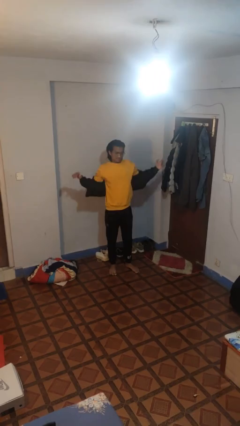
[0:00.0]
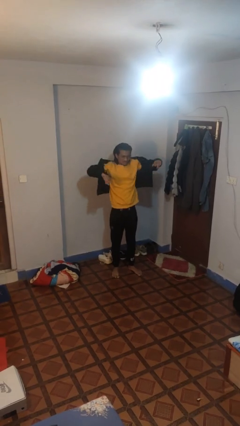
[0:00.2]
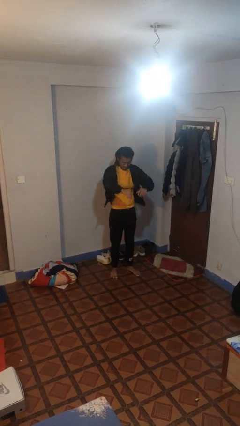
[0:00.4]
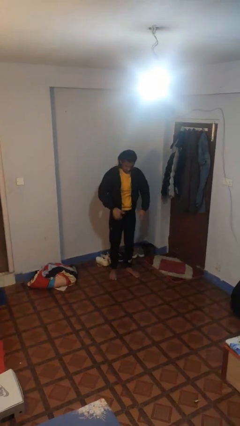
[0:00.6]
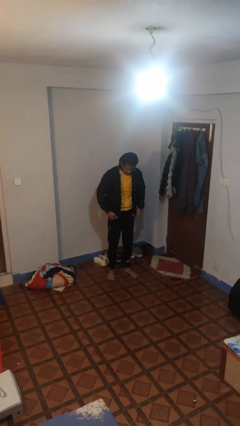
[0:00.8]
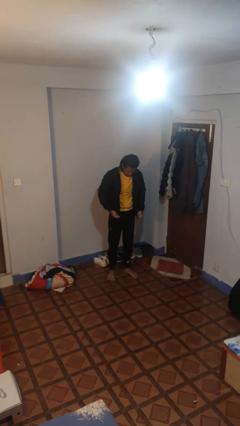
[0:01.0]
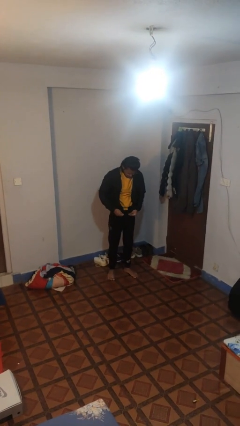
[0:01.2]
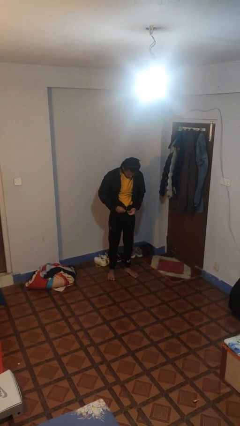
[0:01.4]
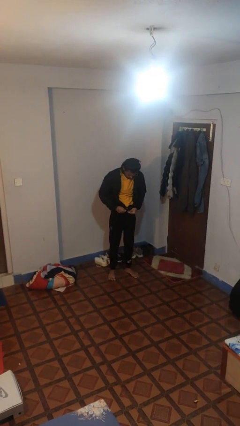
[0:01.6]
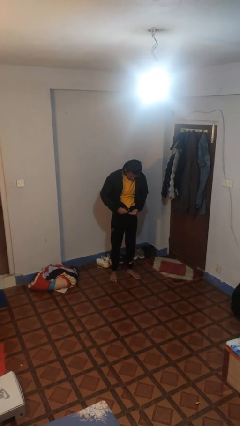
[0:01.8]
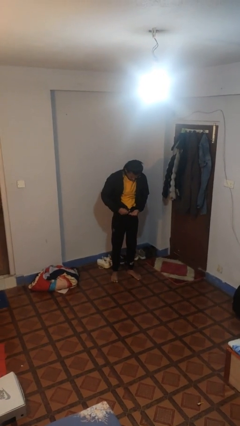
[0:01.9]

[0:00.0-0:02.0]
person puts on jacket

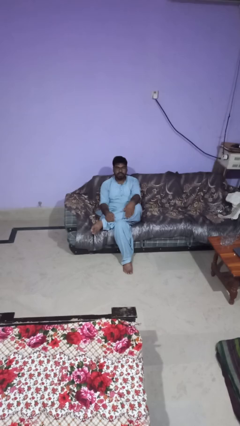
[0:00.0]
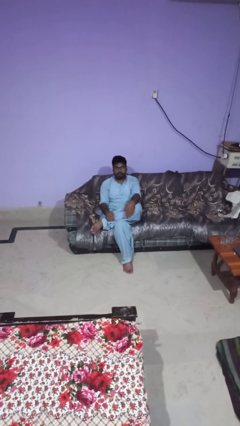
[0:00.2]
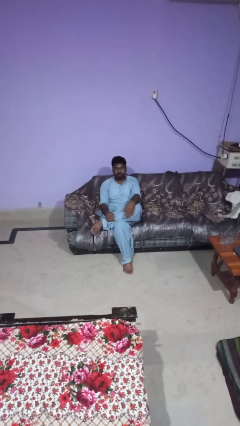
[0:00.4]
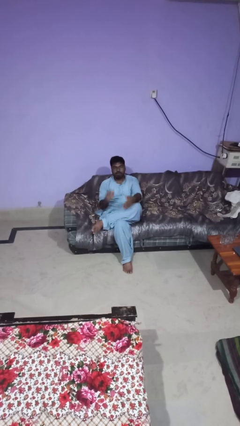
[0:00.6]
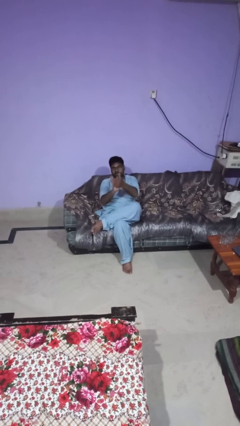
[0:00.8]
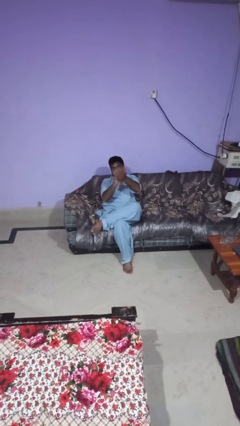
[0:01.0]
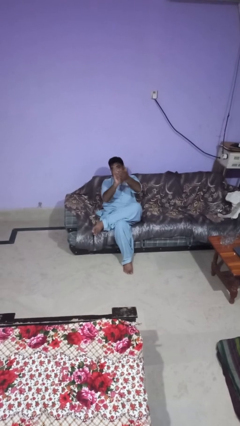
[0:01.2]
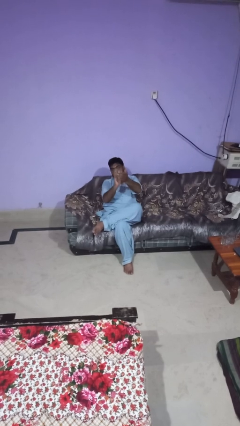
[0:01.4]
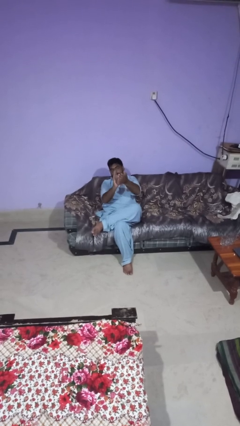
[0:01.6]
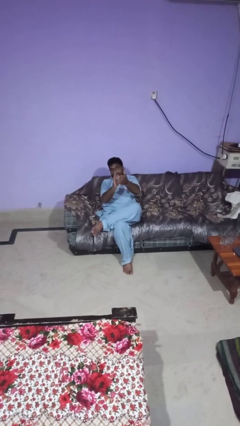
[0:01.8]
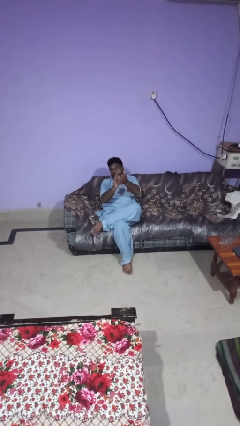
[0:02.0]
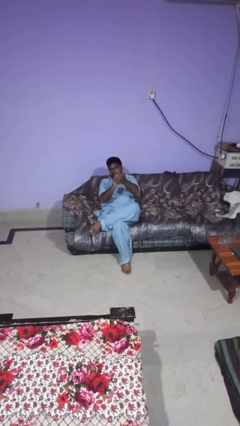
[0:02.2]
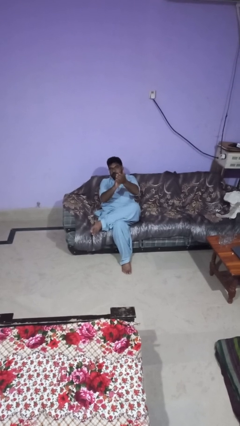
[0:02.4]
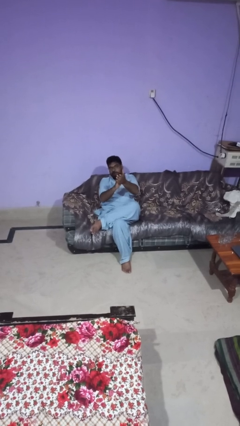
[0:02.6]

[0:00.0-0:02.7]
person claps hands

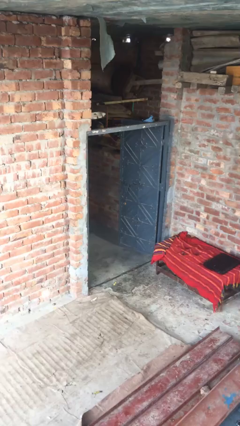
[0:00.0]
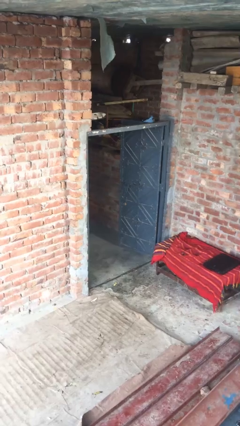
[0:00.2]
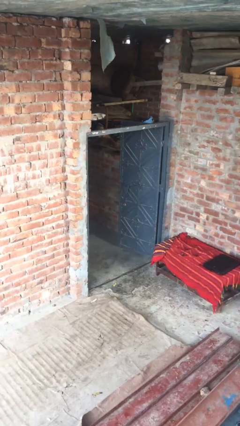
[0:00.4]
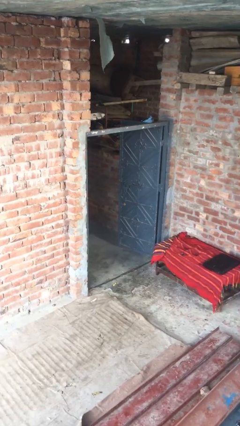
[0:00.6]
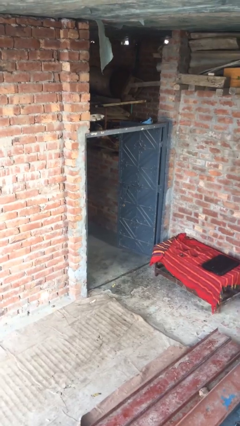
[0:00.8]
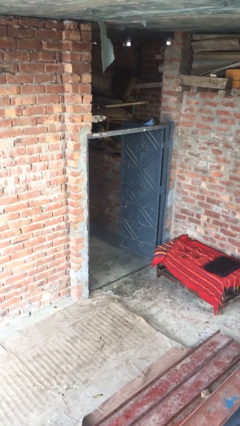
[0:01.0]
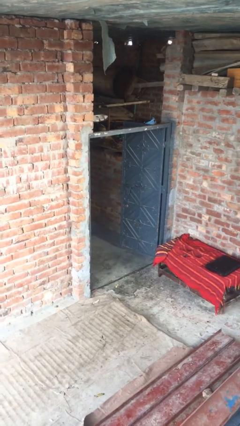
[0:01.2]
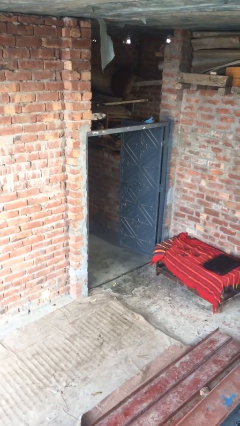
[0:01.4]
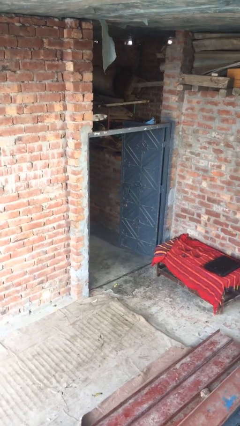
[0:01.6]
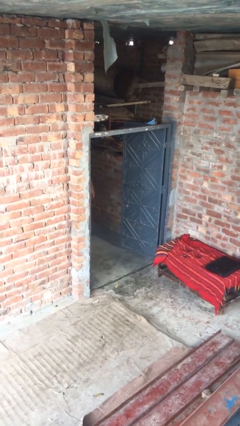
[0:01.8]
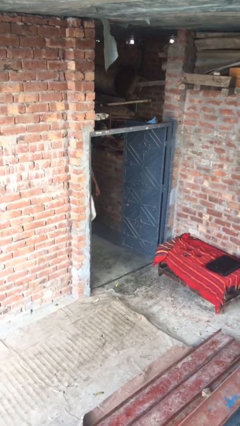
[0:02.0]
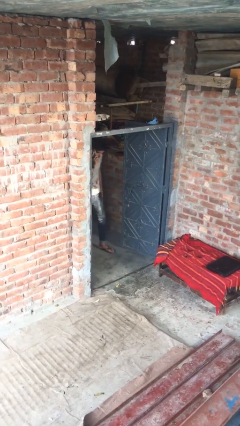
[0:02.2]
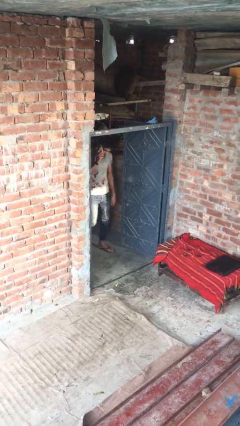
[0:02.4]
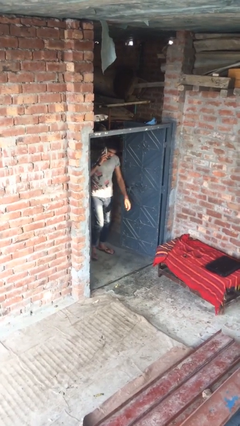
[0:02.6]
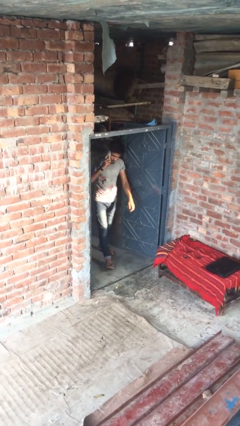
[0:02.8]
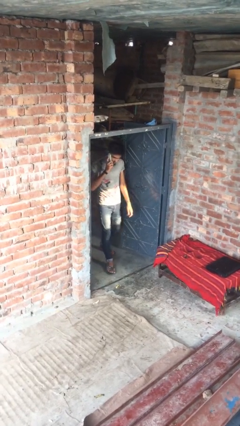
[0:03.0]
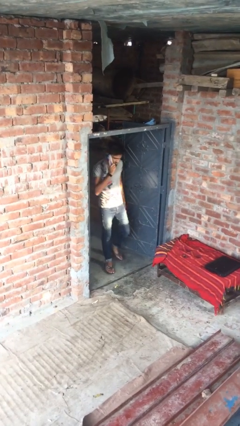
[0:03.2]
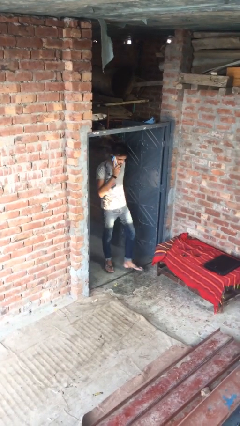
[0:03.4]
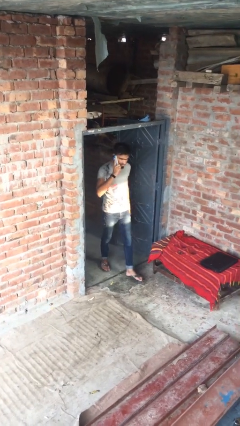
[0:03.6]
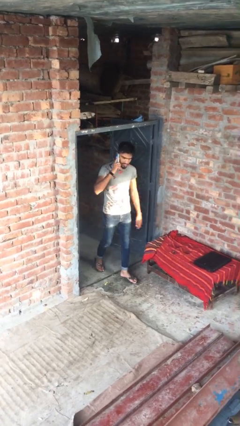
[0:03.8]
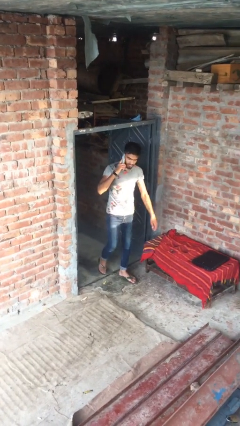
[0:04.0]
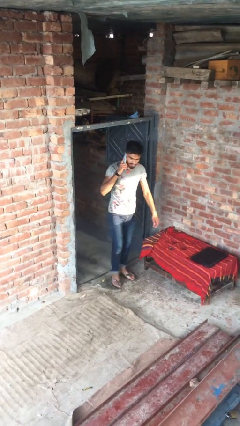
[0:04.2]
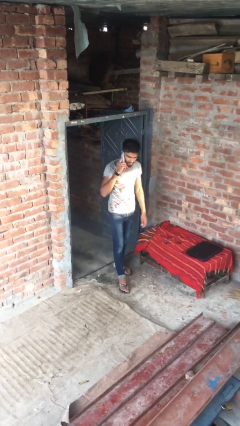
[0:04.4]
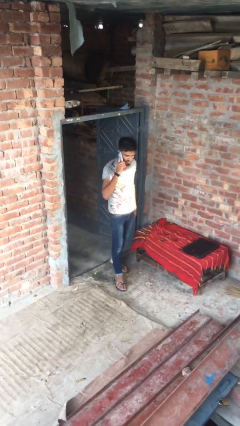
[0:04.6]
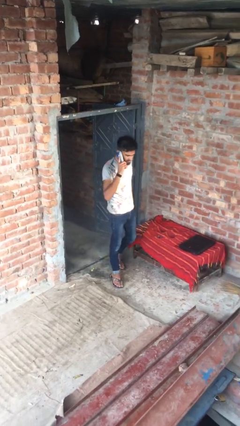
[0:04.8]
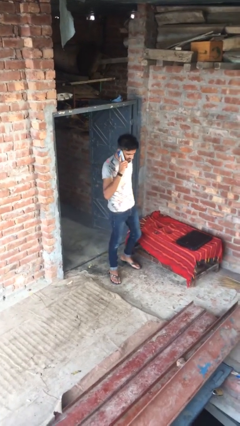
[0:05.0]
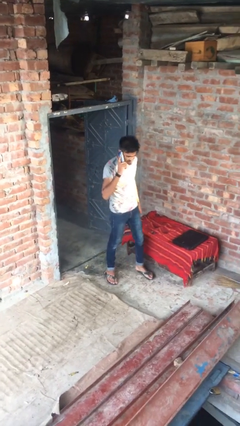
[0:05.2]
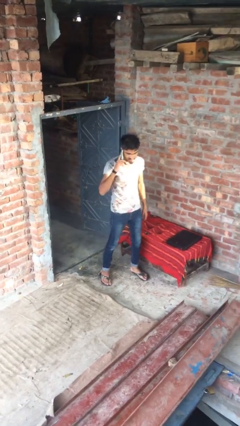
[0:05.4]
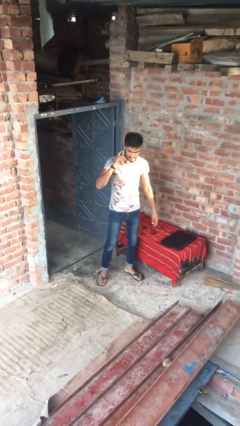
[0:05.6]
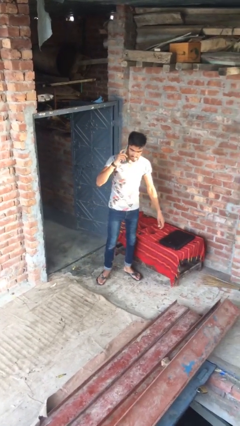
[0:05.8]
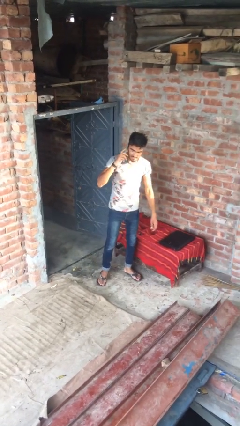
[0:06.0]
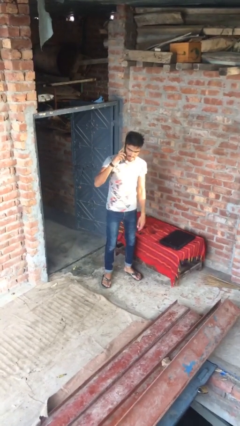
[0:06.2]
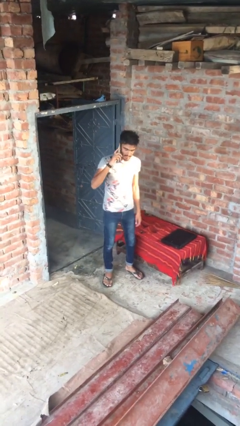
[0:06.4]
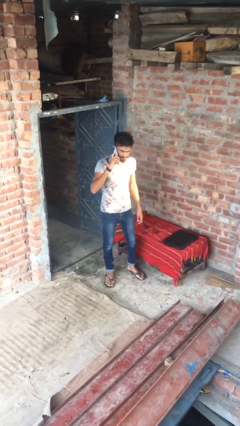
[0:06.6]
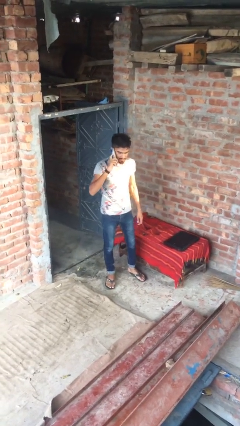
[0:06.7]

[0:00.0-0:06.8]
person enters scene through structure

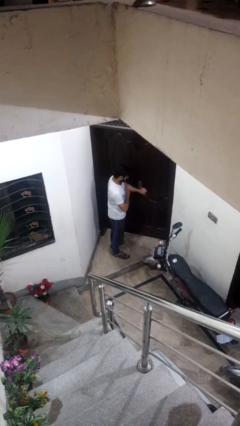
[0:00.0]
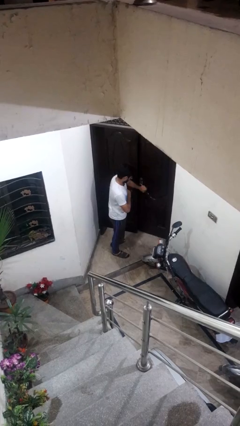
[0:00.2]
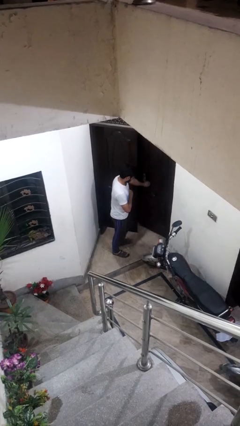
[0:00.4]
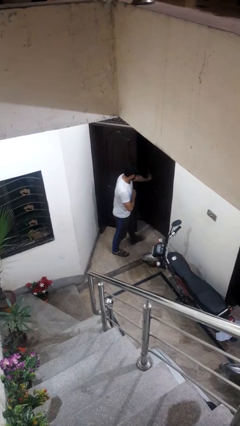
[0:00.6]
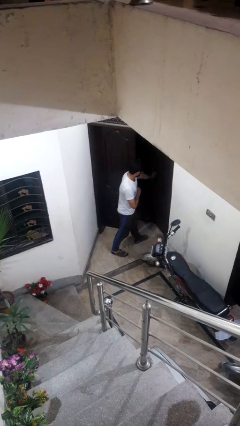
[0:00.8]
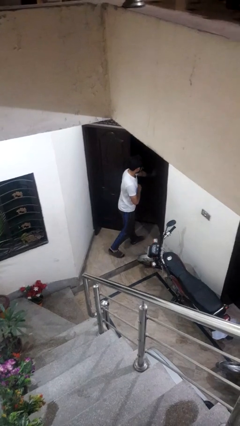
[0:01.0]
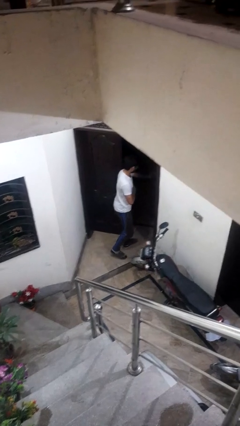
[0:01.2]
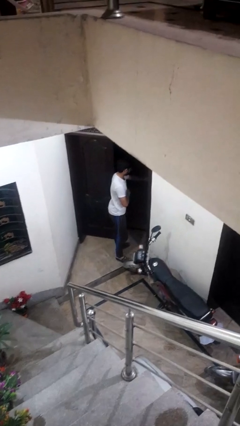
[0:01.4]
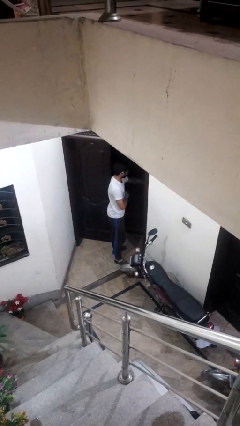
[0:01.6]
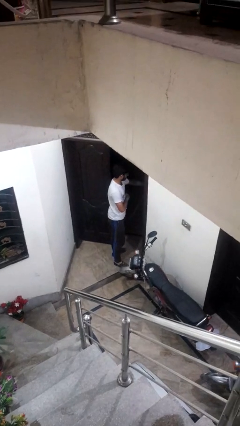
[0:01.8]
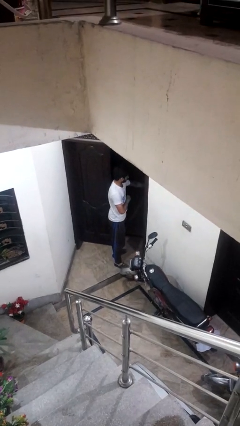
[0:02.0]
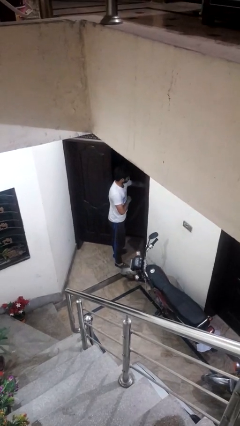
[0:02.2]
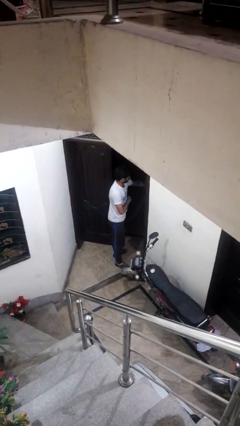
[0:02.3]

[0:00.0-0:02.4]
person opens facility door

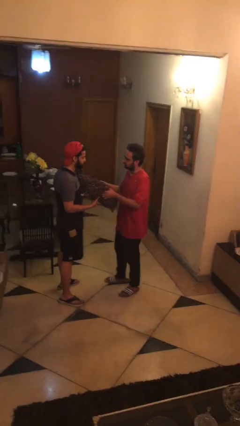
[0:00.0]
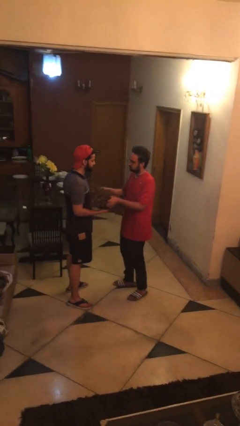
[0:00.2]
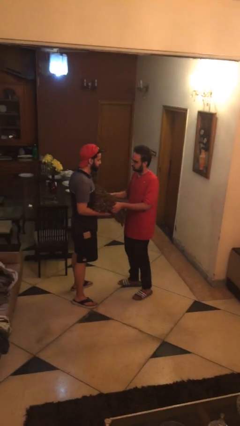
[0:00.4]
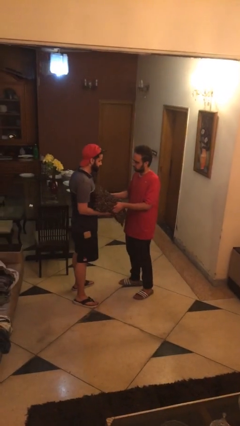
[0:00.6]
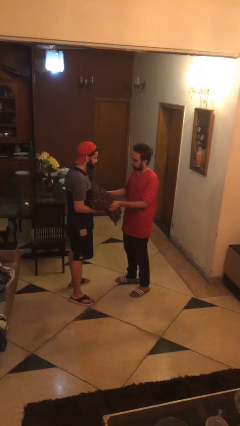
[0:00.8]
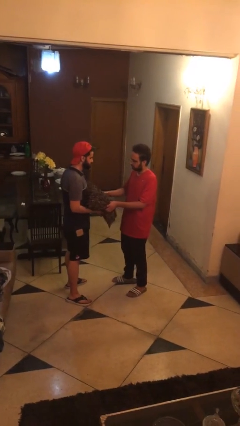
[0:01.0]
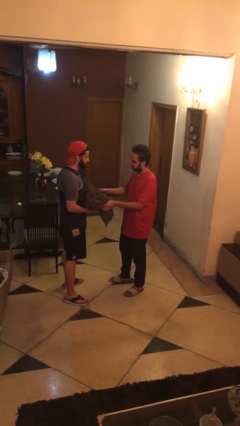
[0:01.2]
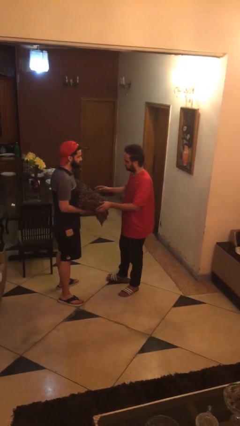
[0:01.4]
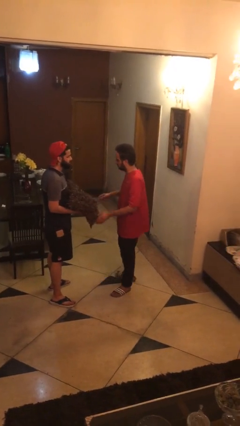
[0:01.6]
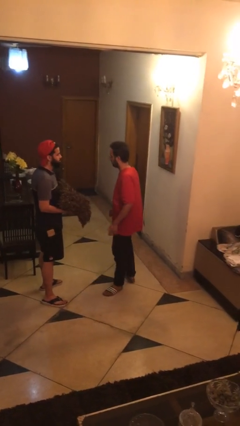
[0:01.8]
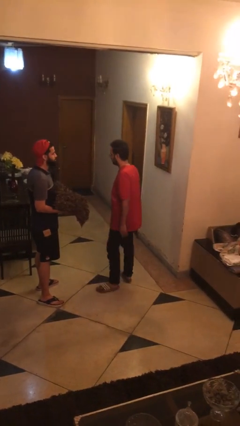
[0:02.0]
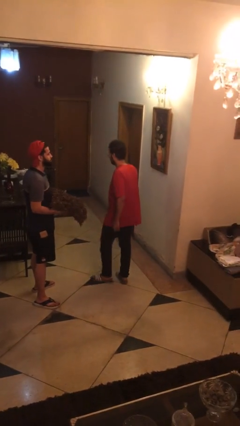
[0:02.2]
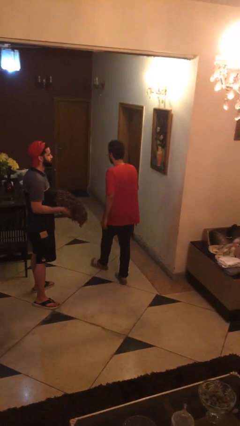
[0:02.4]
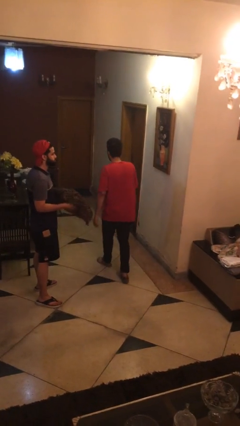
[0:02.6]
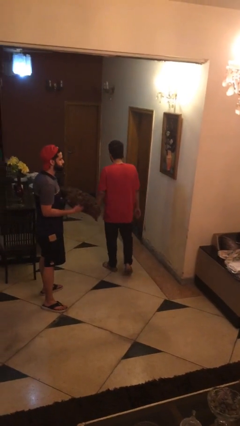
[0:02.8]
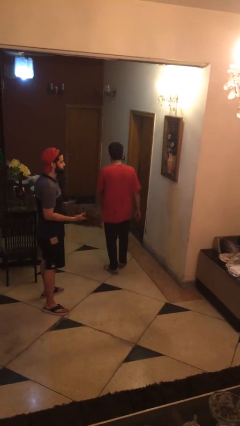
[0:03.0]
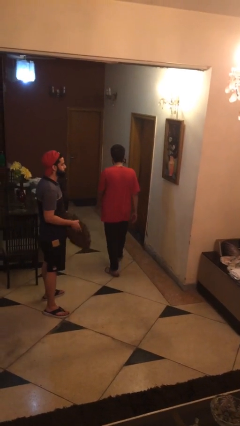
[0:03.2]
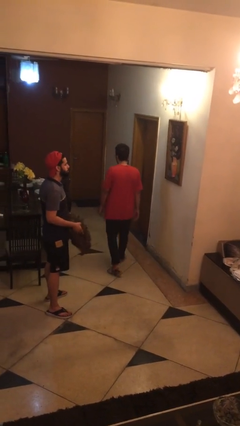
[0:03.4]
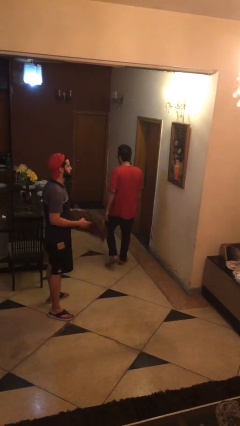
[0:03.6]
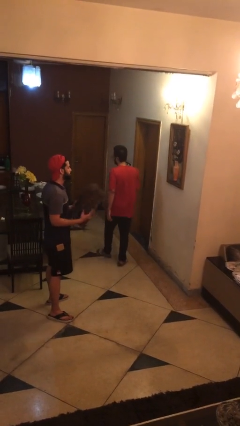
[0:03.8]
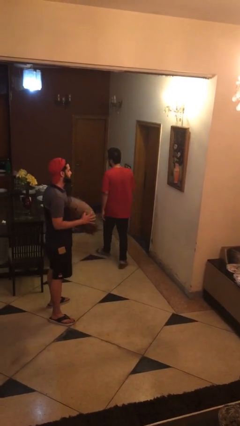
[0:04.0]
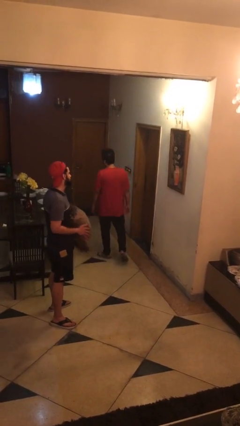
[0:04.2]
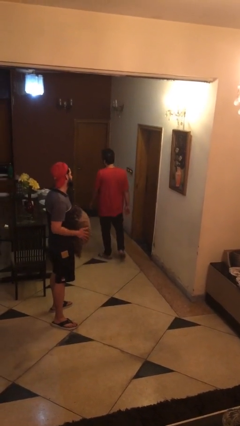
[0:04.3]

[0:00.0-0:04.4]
person transfers object to person
